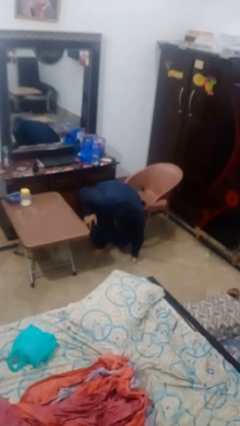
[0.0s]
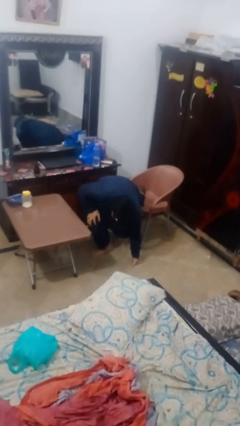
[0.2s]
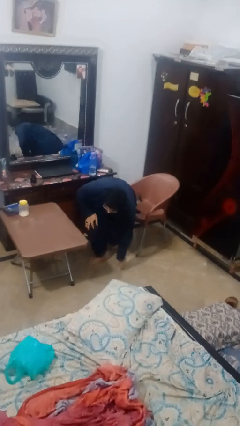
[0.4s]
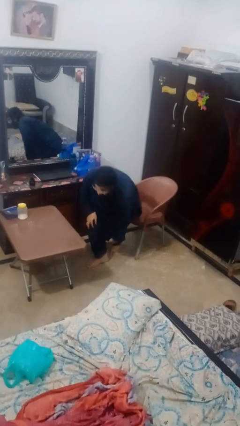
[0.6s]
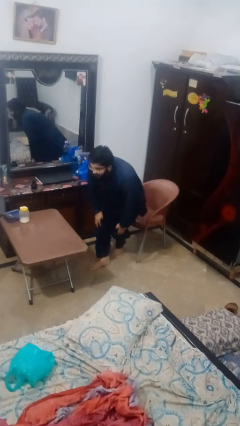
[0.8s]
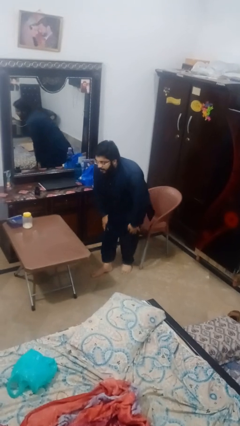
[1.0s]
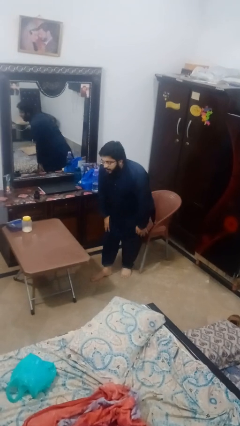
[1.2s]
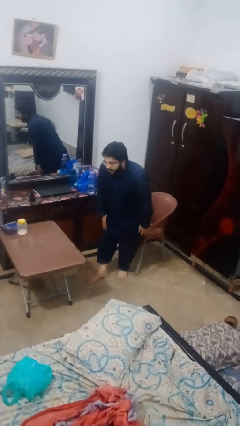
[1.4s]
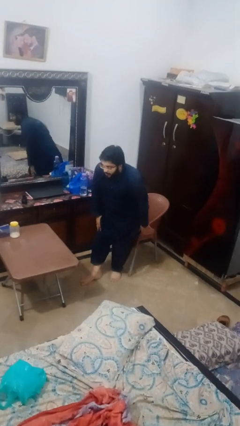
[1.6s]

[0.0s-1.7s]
person stands up from floor

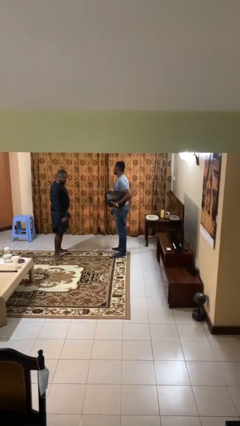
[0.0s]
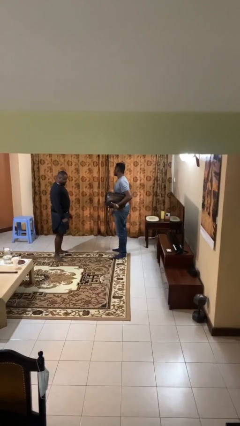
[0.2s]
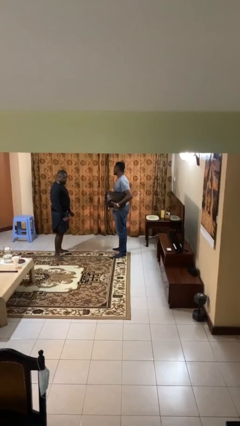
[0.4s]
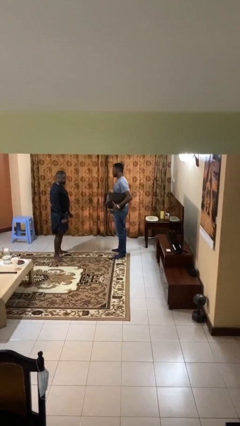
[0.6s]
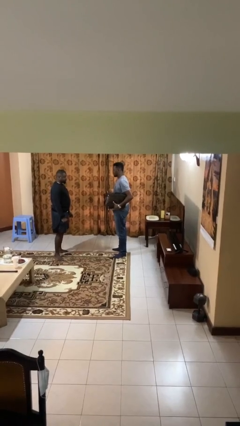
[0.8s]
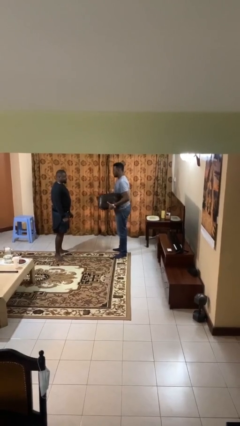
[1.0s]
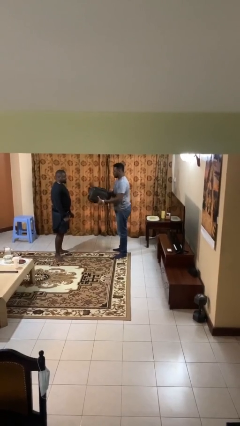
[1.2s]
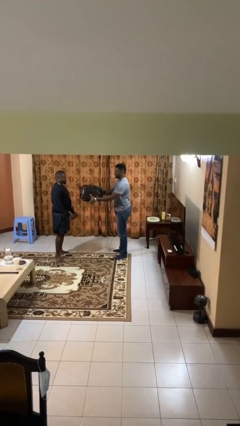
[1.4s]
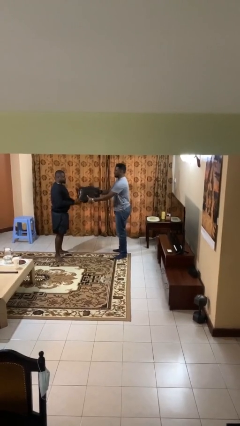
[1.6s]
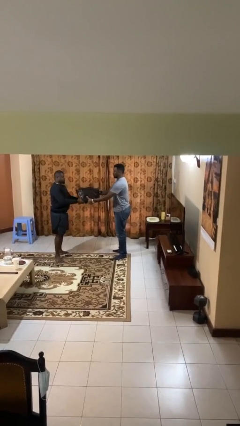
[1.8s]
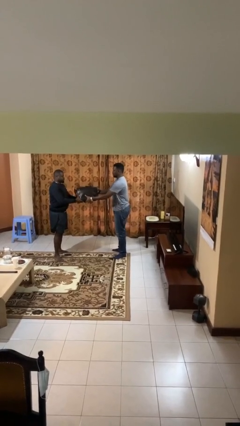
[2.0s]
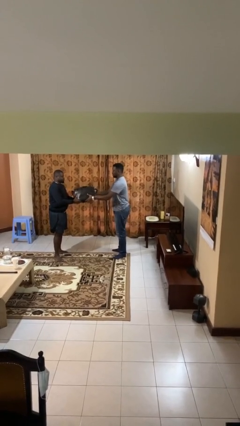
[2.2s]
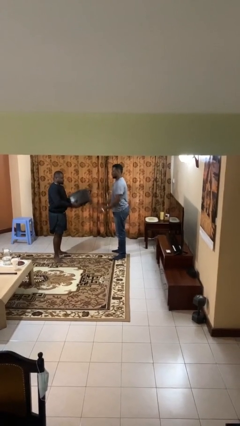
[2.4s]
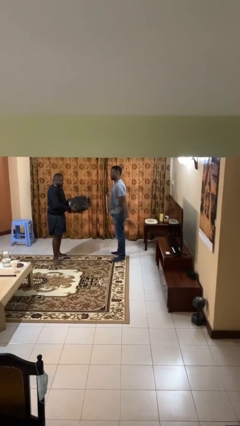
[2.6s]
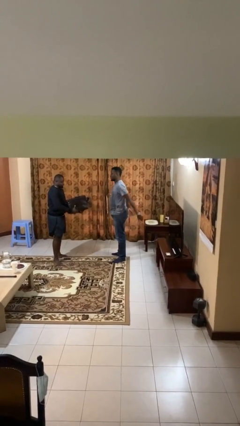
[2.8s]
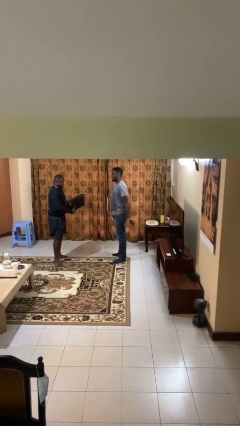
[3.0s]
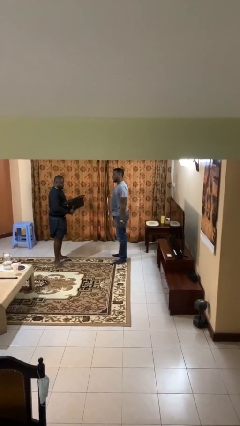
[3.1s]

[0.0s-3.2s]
person transfers object to person

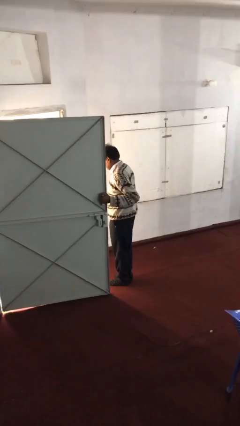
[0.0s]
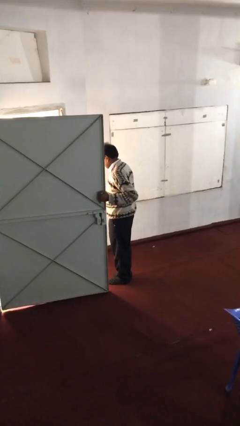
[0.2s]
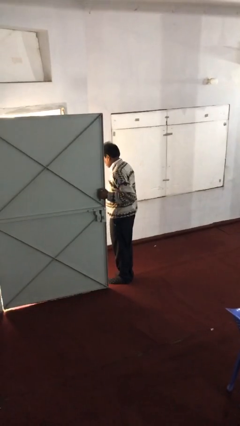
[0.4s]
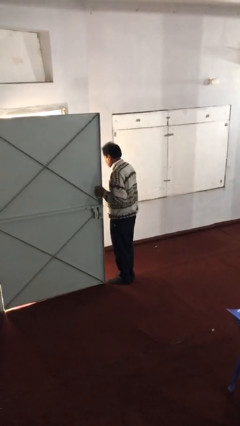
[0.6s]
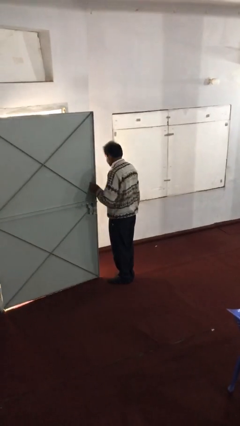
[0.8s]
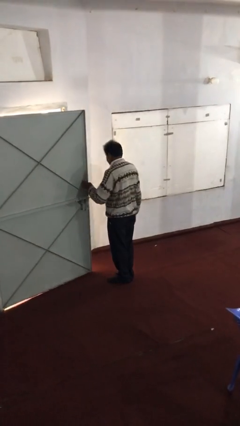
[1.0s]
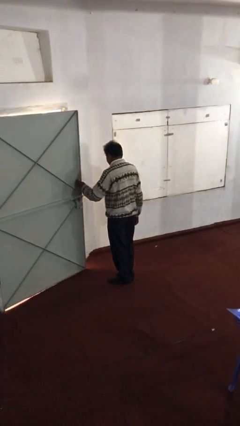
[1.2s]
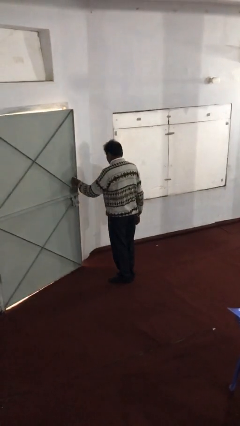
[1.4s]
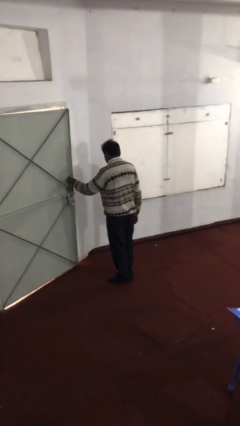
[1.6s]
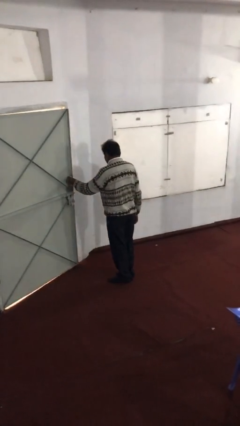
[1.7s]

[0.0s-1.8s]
person closes facility door

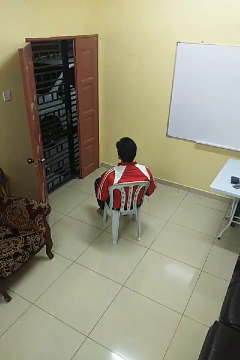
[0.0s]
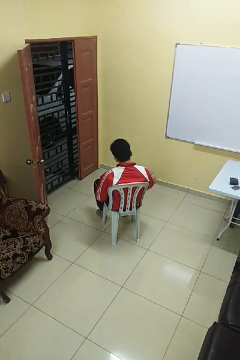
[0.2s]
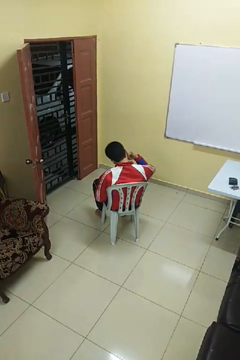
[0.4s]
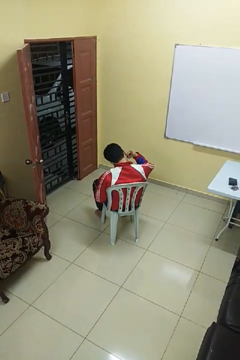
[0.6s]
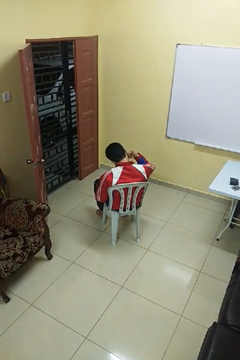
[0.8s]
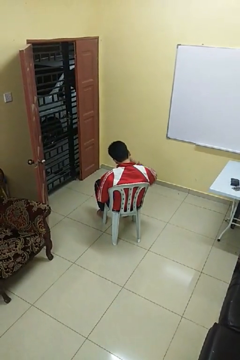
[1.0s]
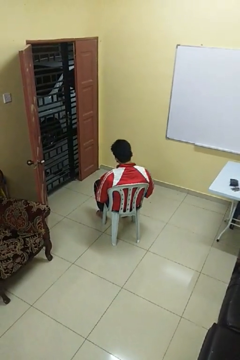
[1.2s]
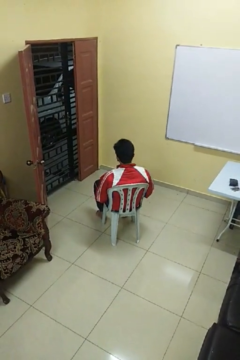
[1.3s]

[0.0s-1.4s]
person gestures call me

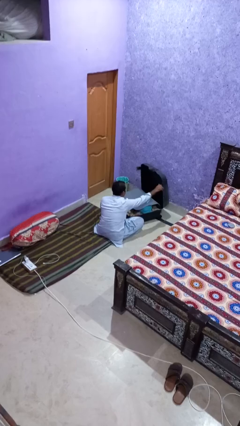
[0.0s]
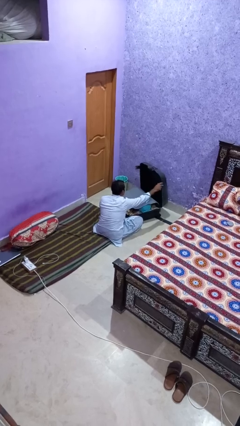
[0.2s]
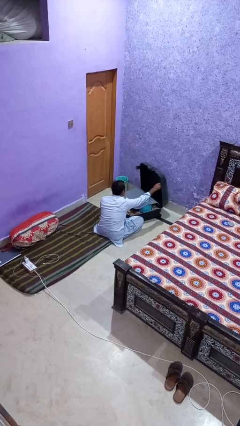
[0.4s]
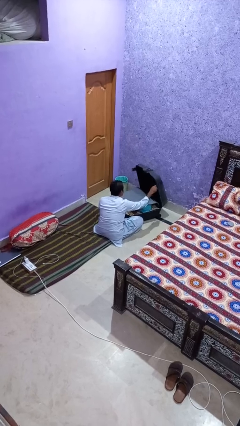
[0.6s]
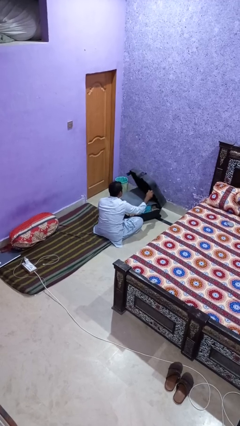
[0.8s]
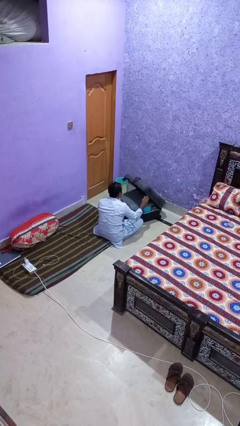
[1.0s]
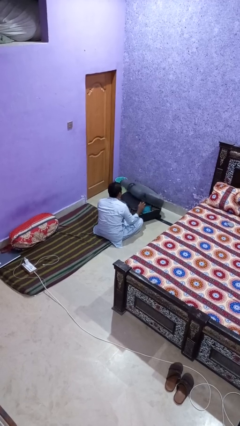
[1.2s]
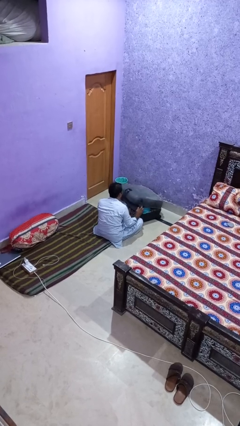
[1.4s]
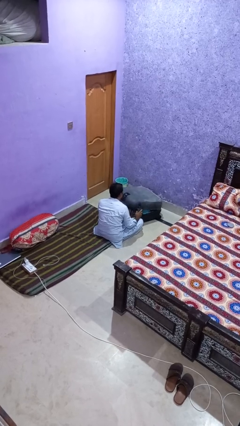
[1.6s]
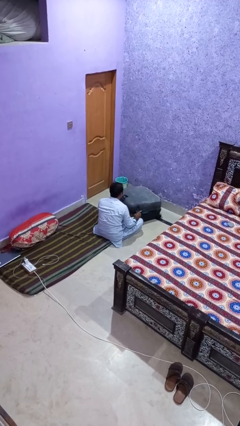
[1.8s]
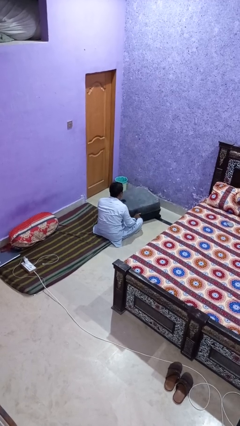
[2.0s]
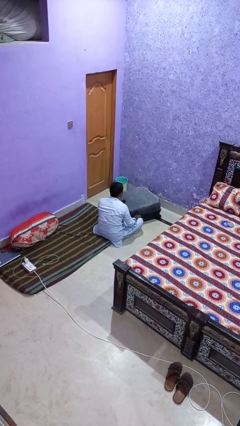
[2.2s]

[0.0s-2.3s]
person closes suitcase

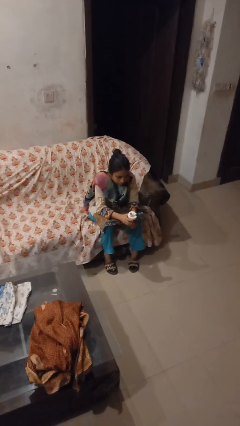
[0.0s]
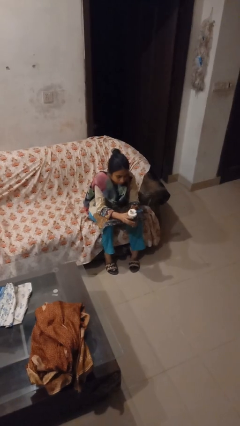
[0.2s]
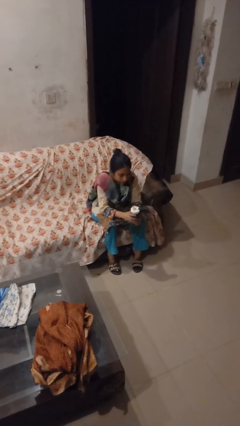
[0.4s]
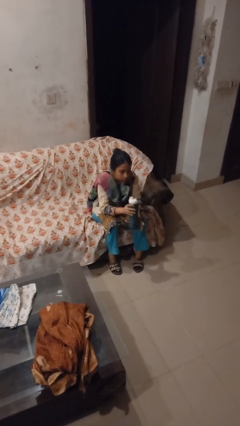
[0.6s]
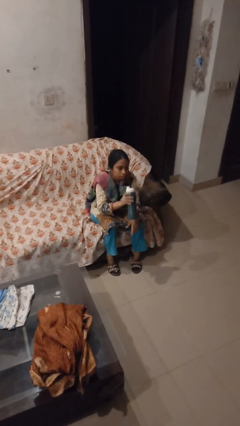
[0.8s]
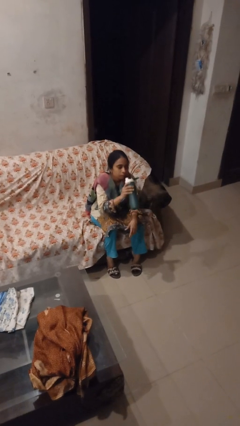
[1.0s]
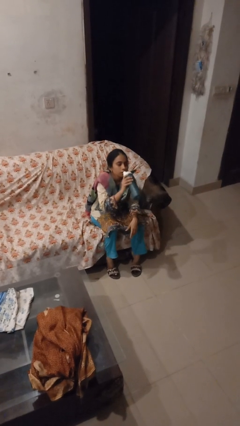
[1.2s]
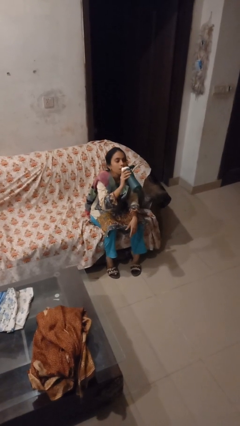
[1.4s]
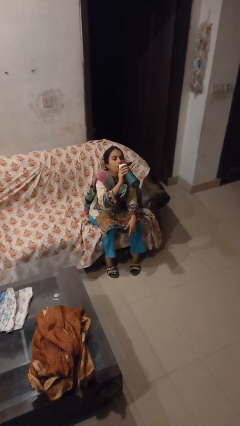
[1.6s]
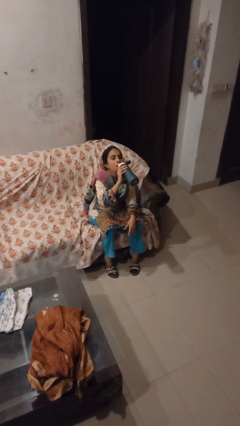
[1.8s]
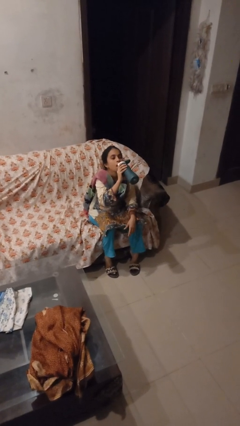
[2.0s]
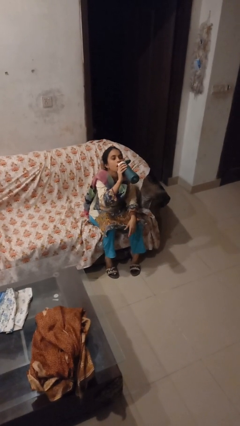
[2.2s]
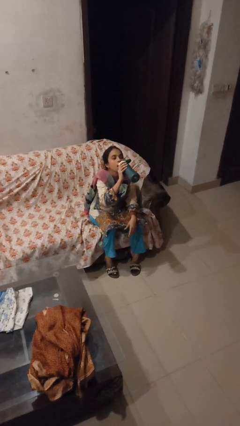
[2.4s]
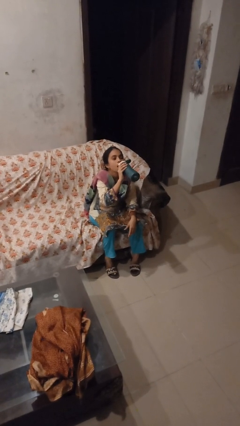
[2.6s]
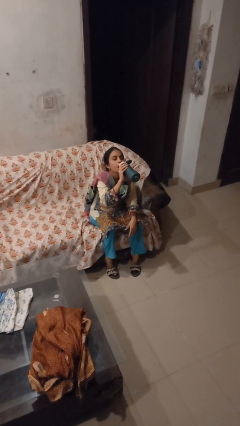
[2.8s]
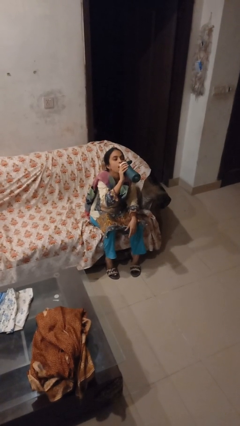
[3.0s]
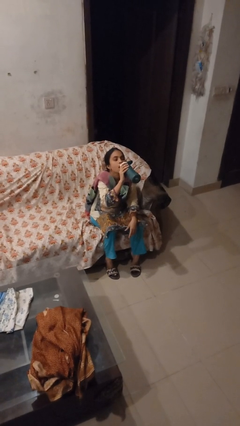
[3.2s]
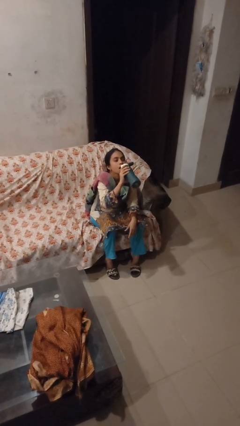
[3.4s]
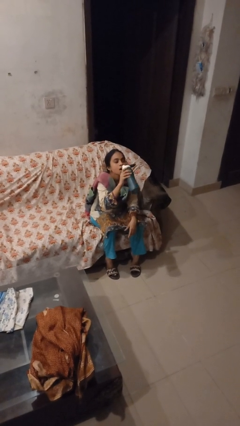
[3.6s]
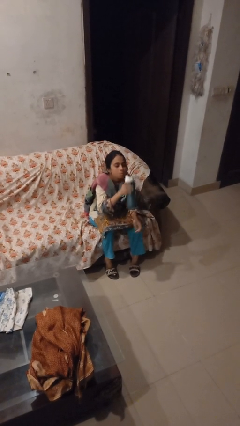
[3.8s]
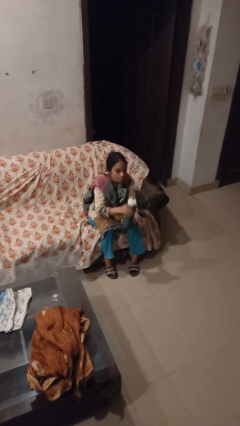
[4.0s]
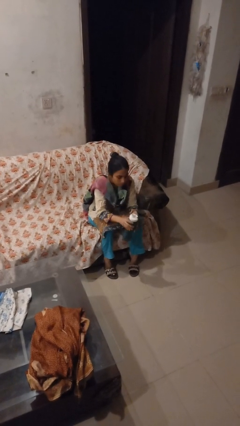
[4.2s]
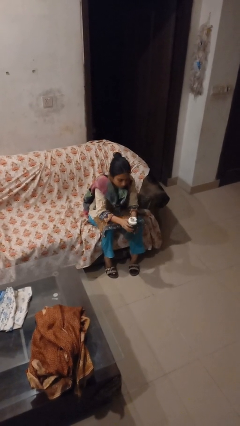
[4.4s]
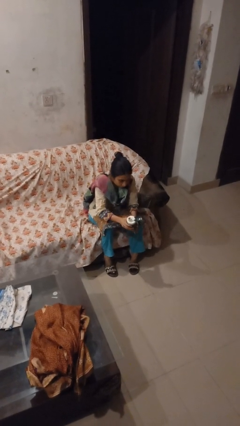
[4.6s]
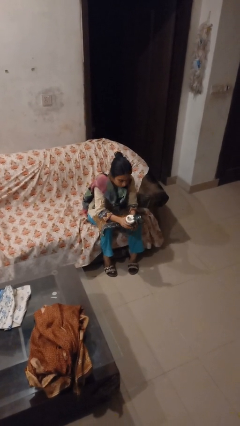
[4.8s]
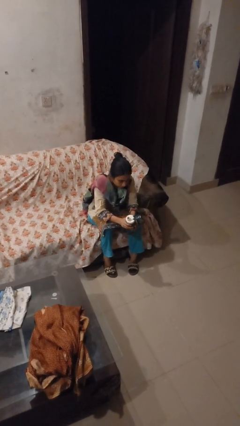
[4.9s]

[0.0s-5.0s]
person drinks from bottle

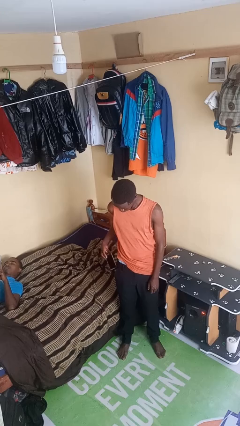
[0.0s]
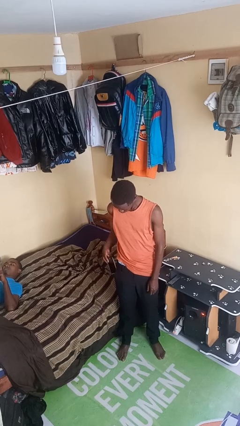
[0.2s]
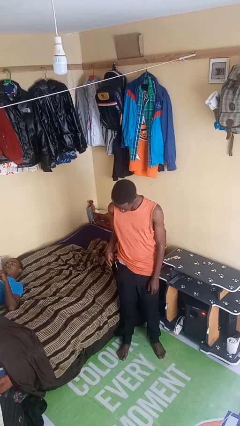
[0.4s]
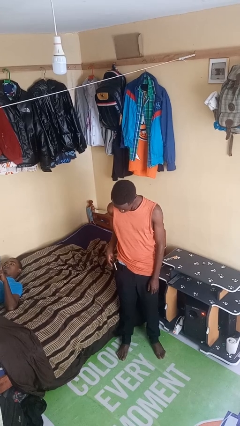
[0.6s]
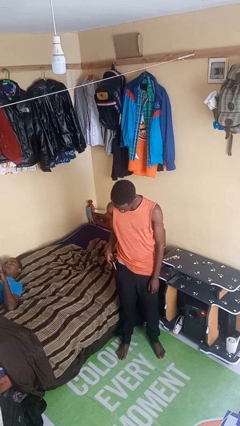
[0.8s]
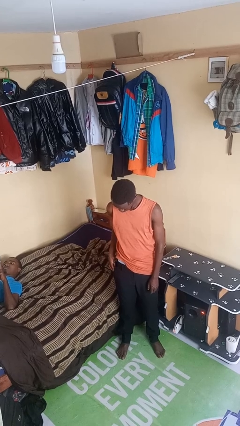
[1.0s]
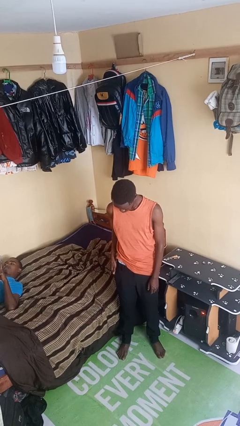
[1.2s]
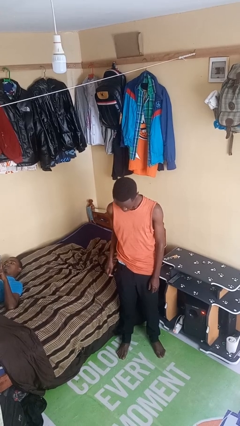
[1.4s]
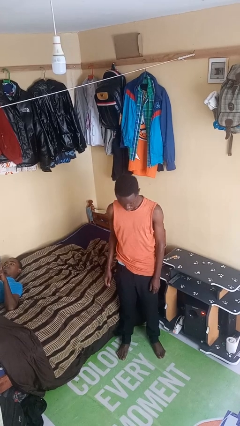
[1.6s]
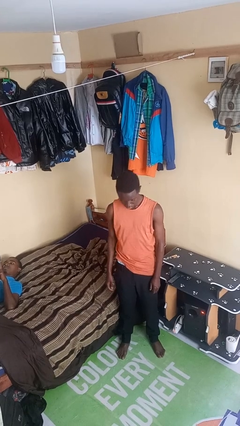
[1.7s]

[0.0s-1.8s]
person puts phone into pocket

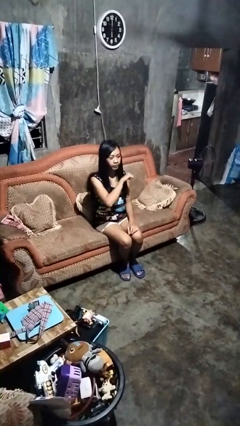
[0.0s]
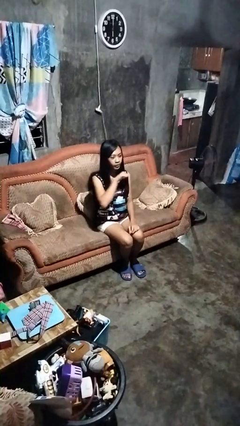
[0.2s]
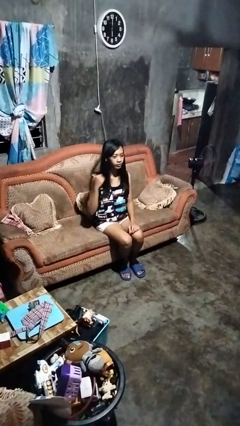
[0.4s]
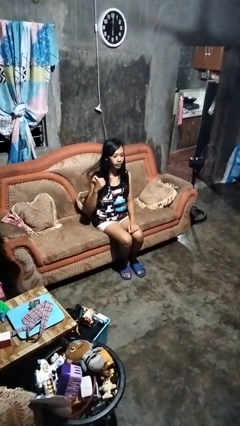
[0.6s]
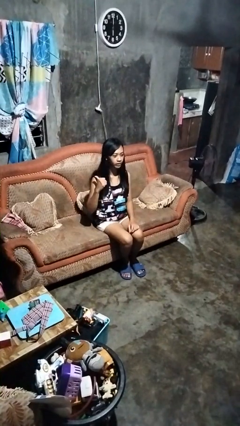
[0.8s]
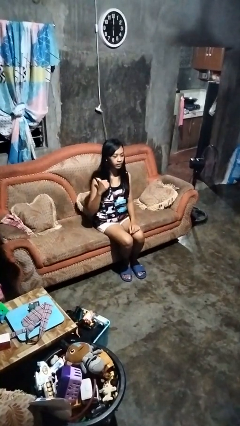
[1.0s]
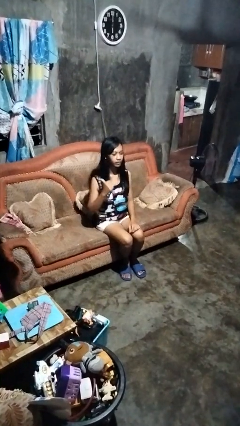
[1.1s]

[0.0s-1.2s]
person gestures cut
